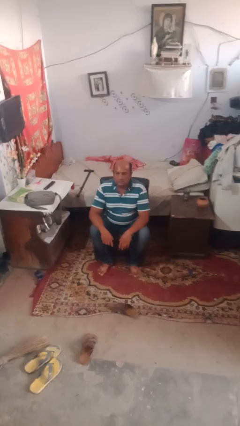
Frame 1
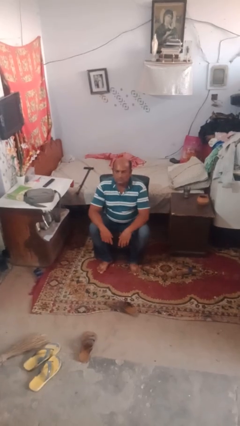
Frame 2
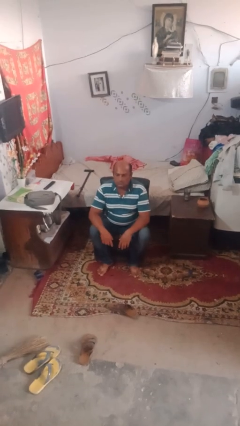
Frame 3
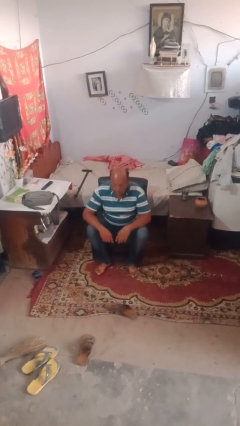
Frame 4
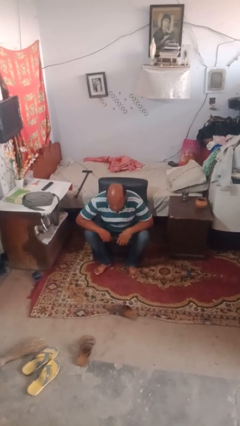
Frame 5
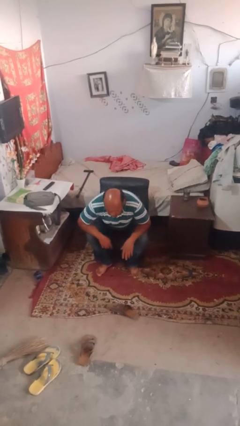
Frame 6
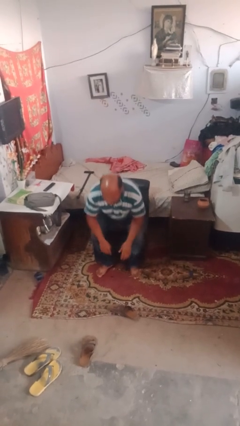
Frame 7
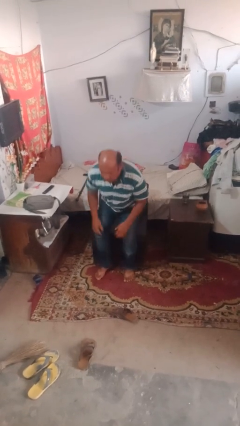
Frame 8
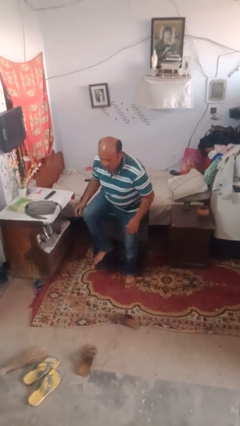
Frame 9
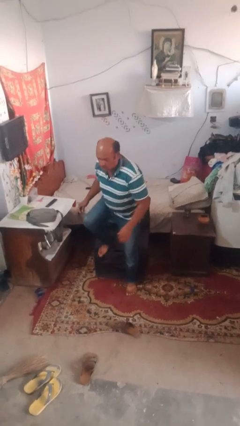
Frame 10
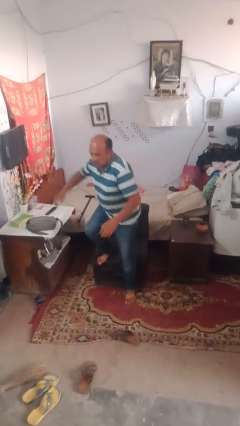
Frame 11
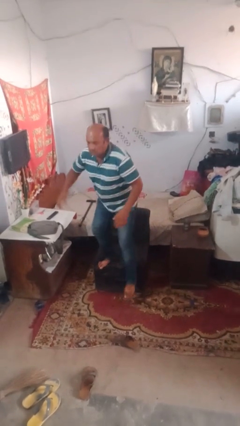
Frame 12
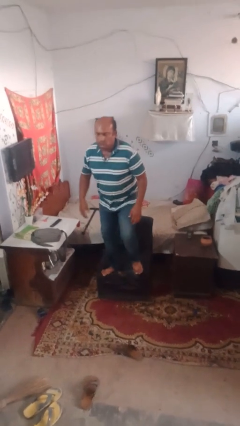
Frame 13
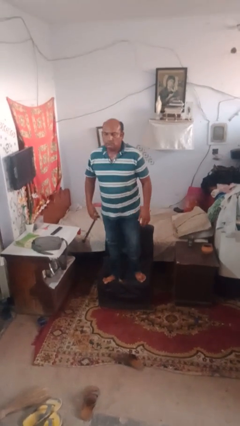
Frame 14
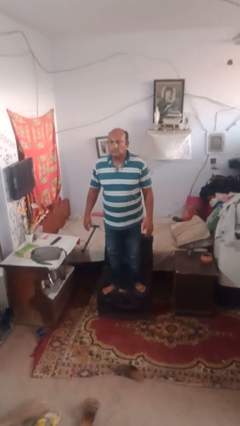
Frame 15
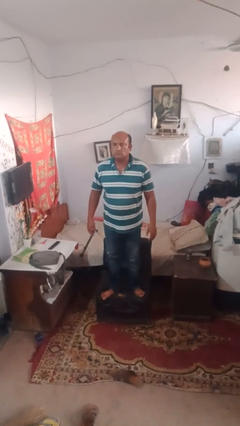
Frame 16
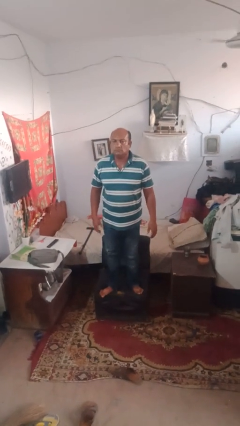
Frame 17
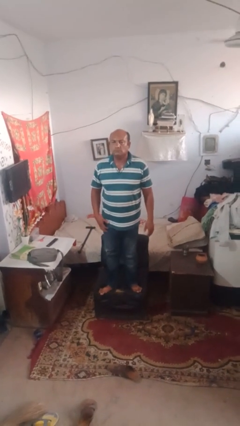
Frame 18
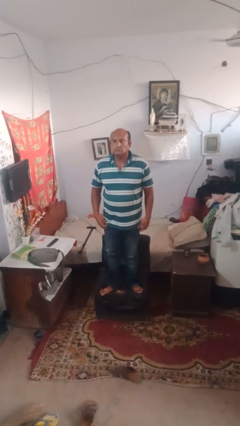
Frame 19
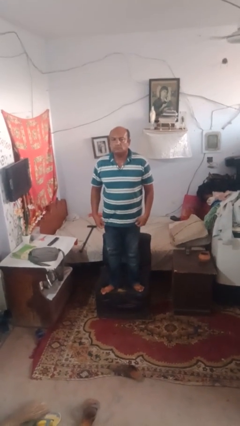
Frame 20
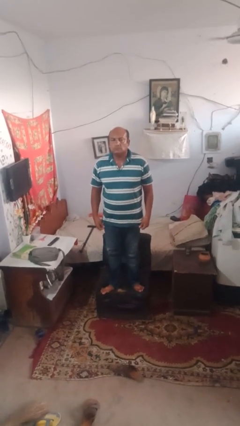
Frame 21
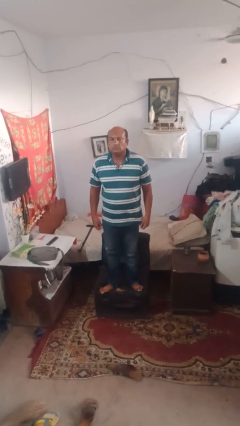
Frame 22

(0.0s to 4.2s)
person stands up

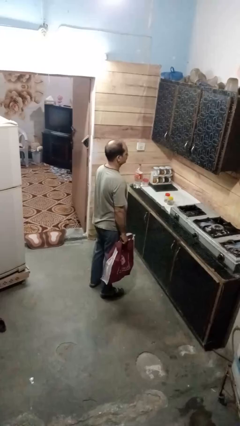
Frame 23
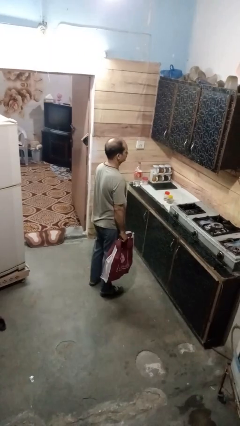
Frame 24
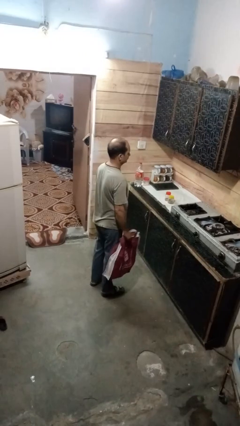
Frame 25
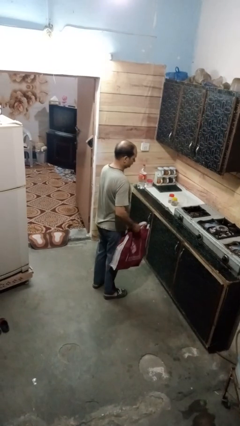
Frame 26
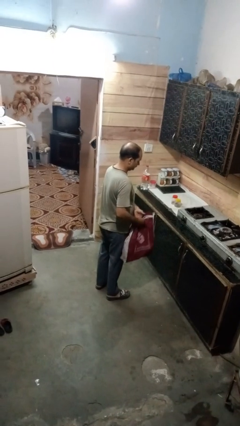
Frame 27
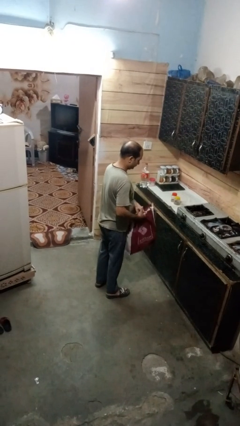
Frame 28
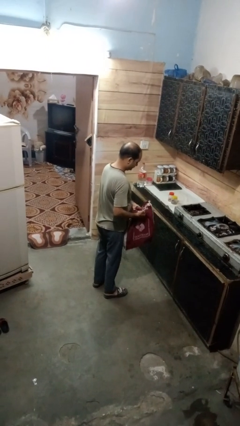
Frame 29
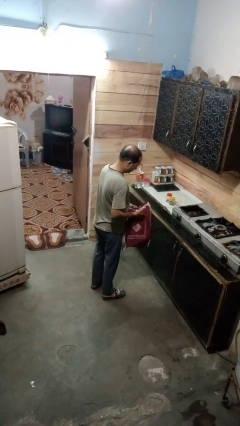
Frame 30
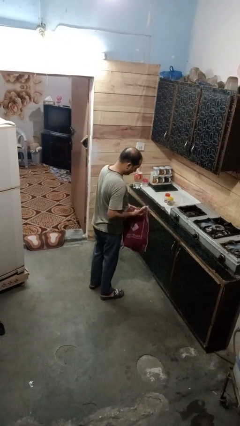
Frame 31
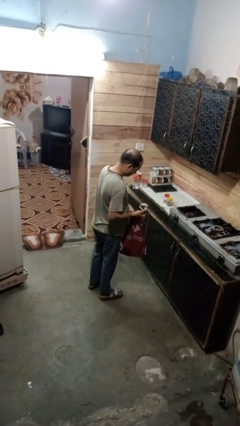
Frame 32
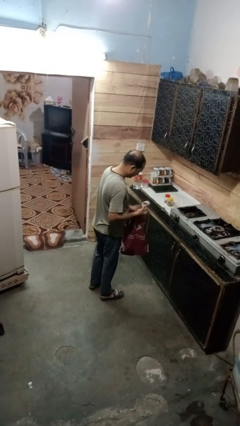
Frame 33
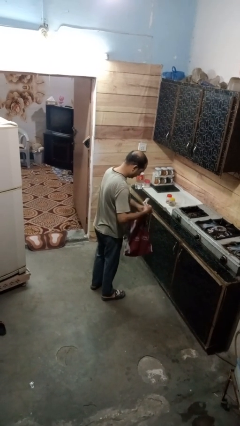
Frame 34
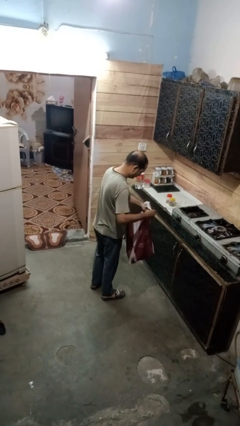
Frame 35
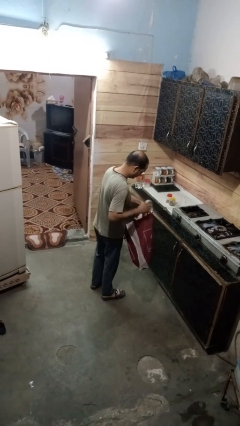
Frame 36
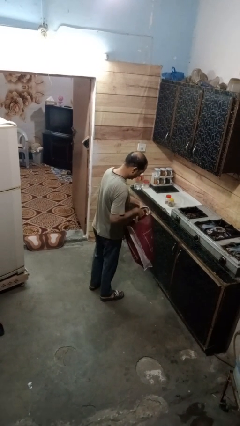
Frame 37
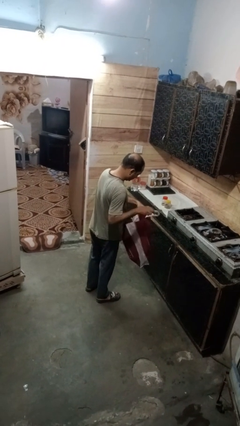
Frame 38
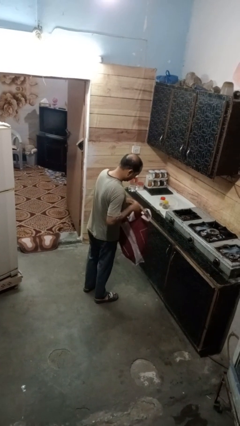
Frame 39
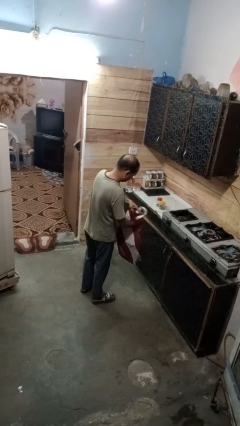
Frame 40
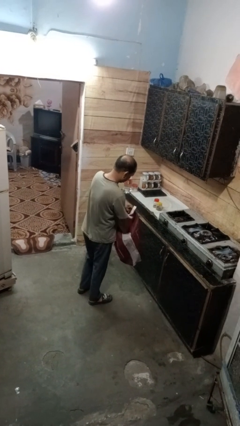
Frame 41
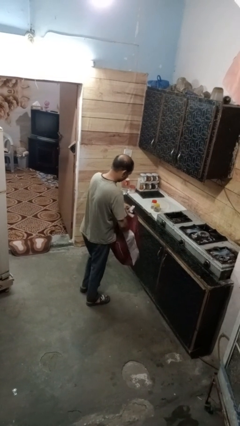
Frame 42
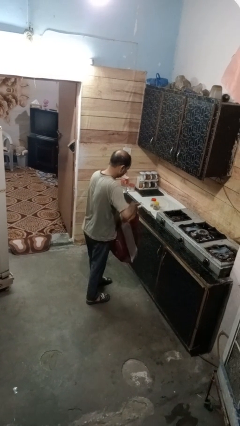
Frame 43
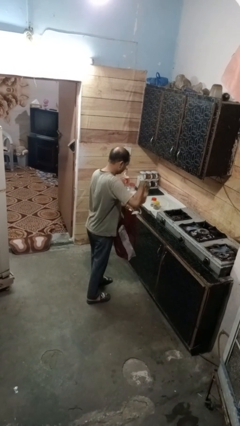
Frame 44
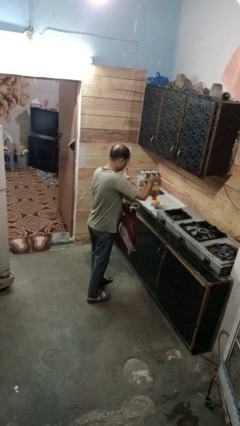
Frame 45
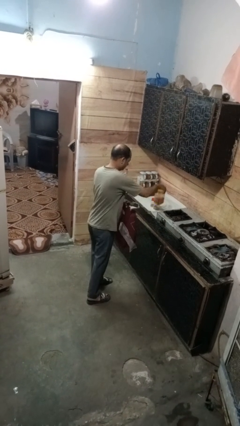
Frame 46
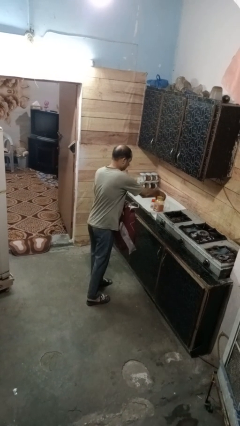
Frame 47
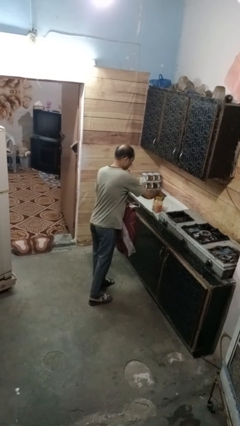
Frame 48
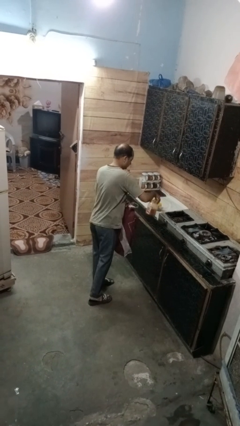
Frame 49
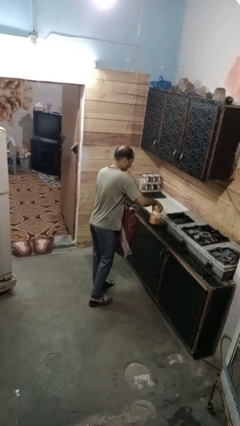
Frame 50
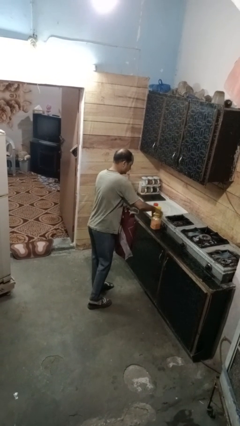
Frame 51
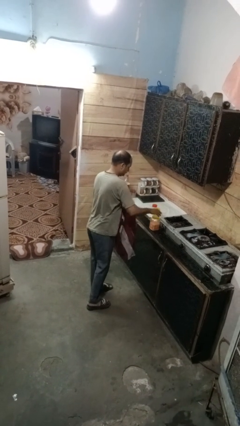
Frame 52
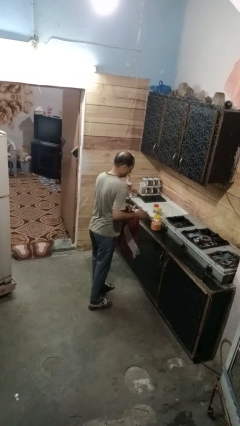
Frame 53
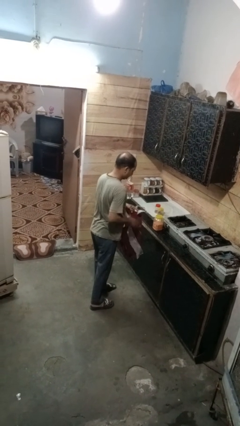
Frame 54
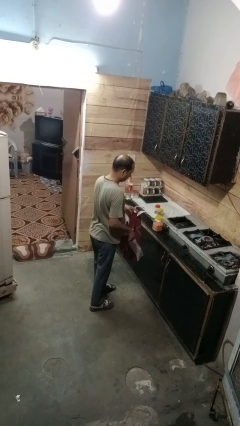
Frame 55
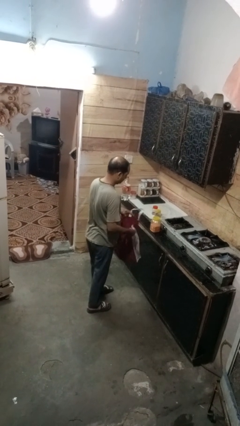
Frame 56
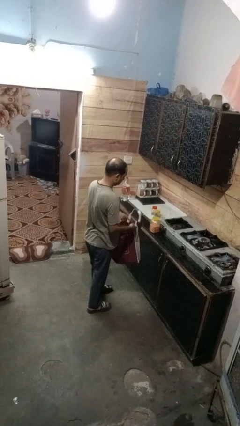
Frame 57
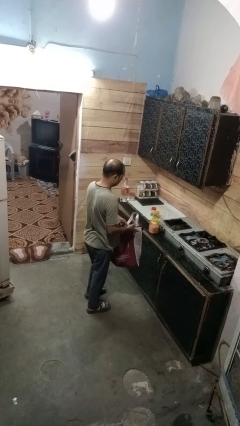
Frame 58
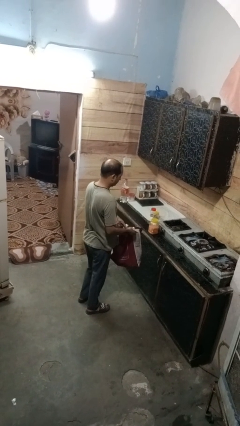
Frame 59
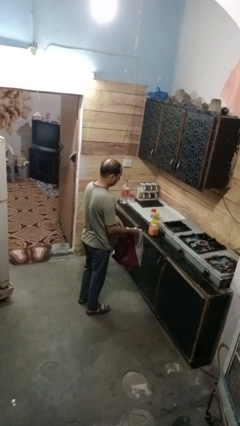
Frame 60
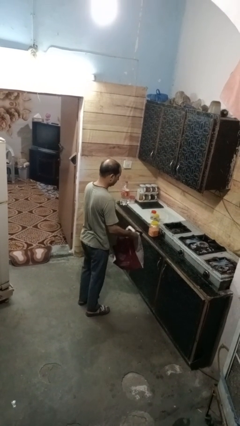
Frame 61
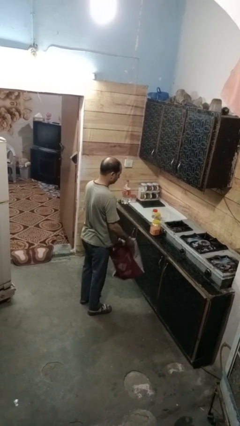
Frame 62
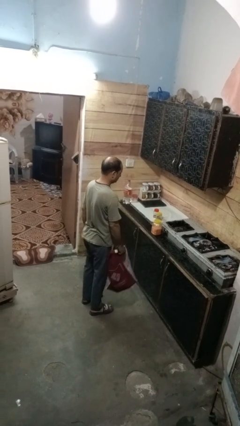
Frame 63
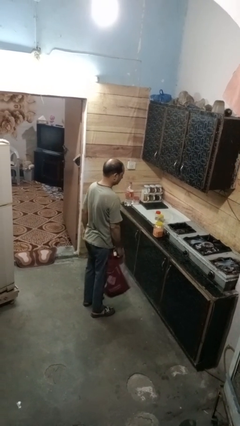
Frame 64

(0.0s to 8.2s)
person takes object from bag

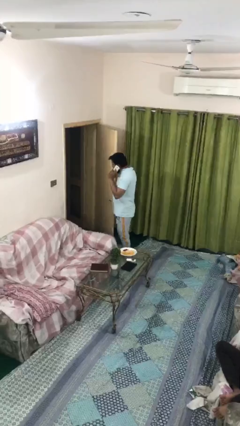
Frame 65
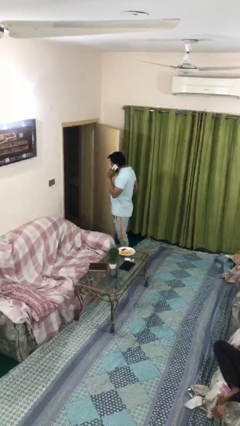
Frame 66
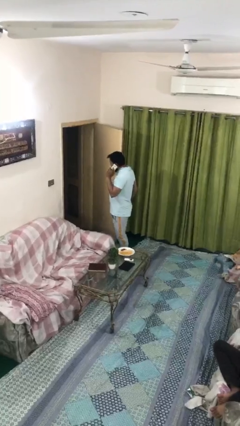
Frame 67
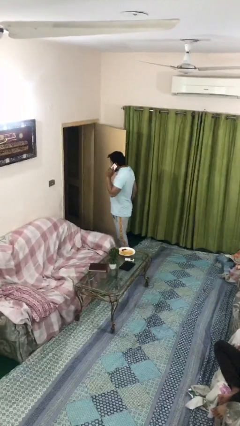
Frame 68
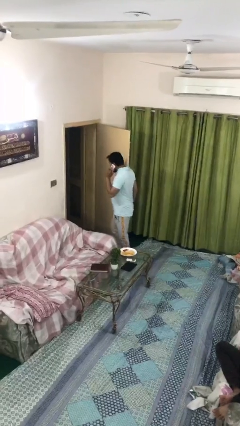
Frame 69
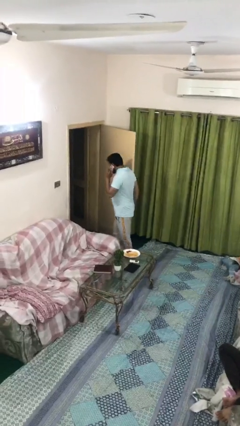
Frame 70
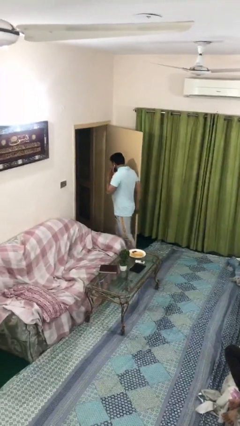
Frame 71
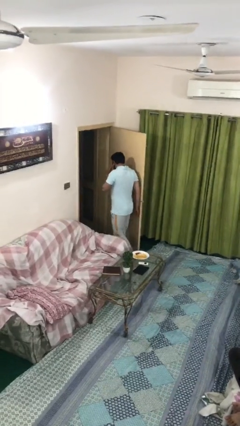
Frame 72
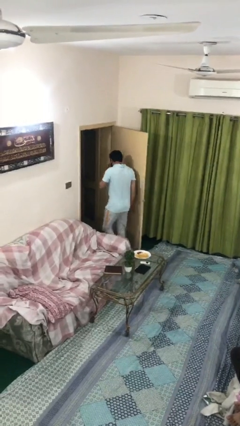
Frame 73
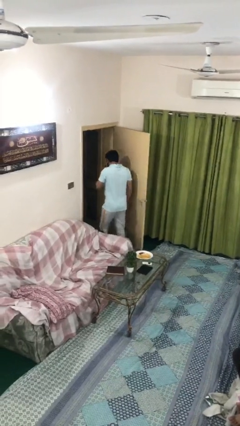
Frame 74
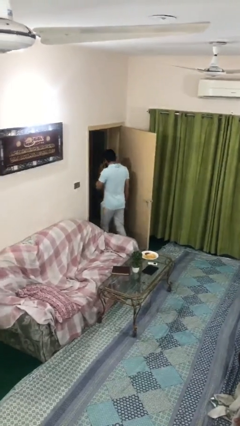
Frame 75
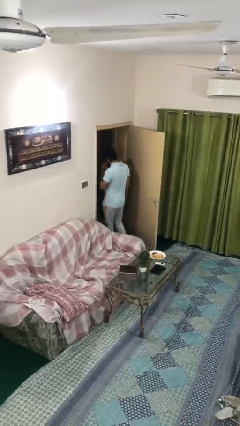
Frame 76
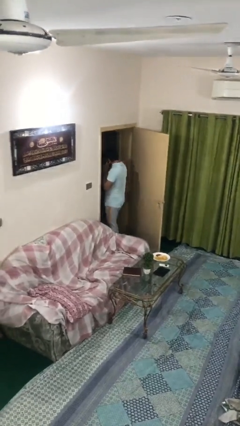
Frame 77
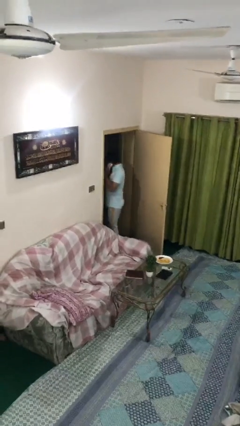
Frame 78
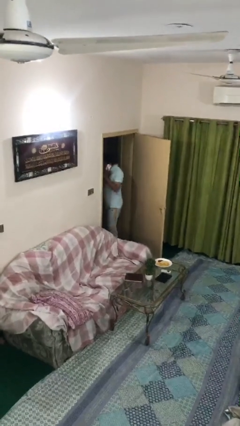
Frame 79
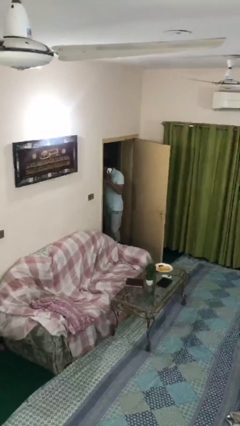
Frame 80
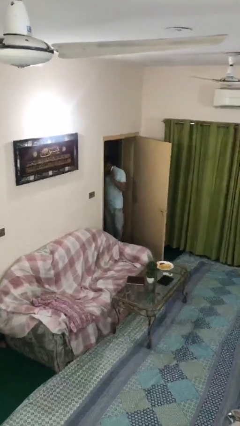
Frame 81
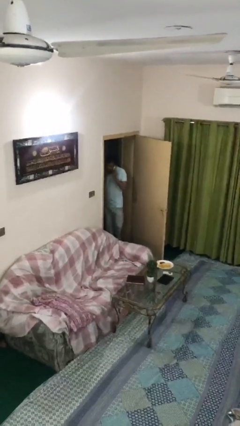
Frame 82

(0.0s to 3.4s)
person exits scene through structure

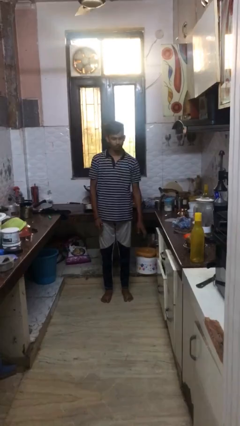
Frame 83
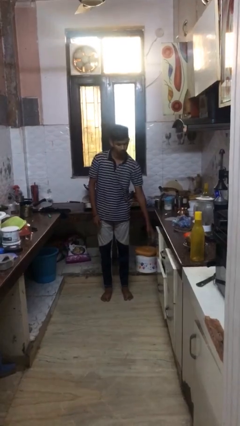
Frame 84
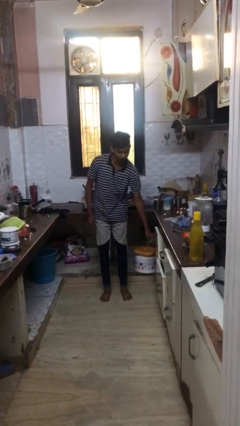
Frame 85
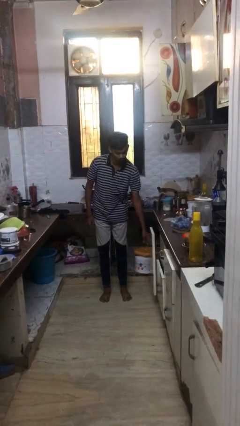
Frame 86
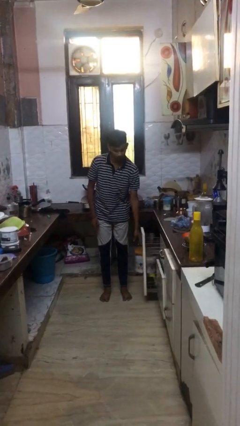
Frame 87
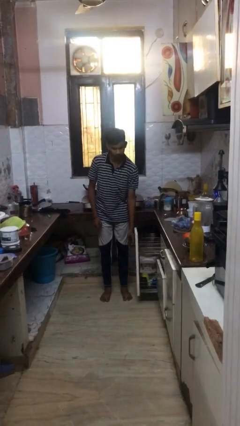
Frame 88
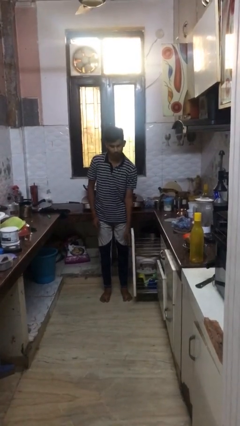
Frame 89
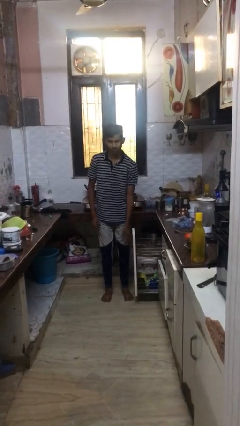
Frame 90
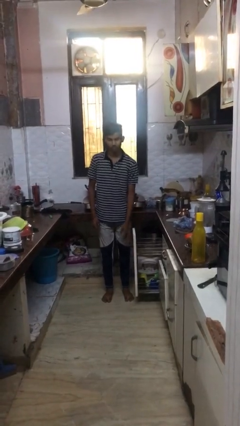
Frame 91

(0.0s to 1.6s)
person opens dishwasher

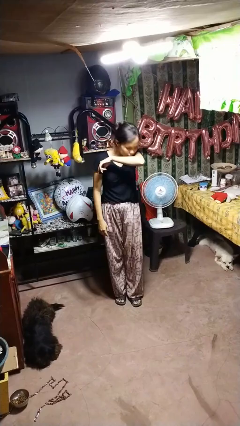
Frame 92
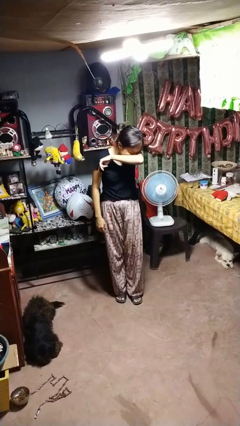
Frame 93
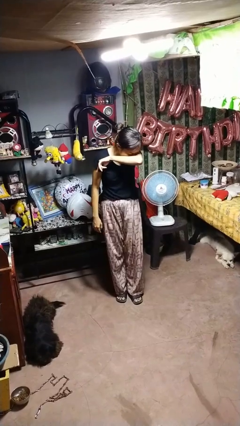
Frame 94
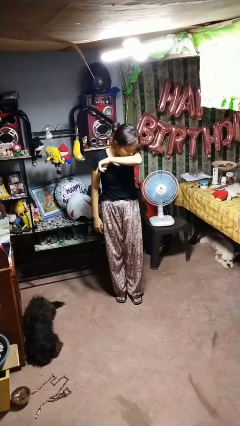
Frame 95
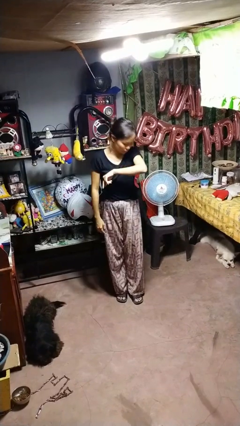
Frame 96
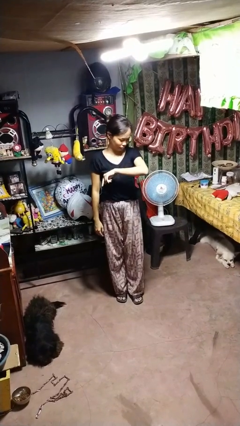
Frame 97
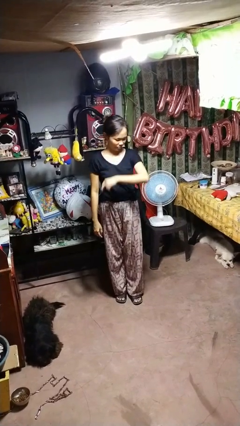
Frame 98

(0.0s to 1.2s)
person sneezes into arm
